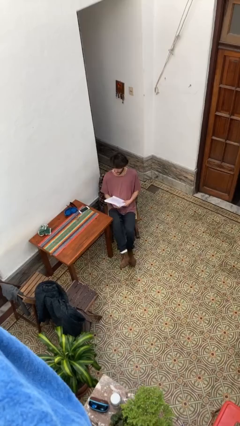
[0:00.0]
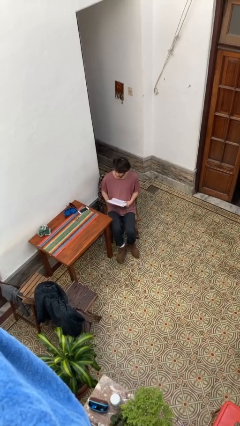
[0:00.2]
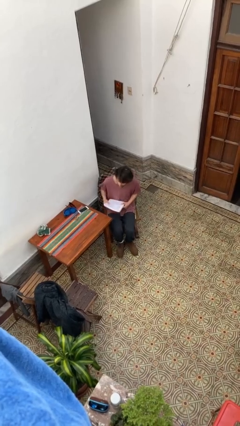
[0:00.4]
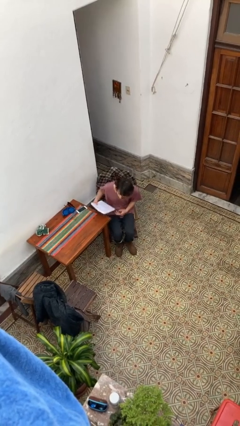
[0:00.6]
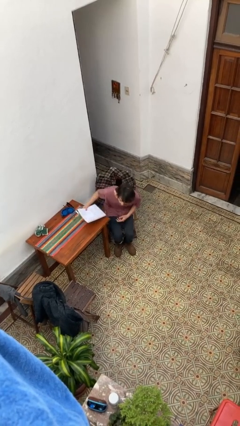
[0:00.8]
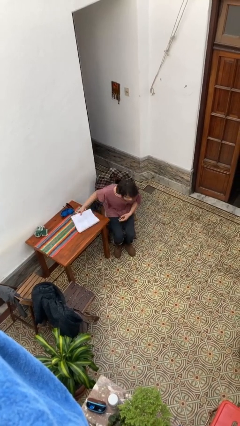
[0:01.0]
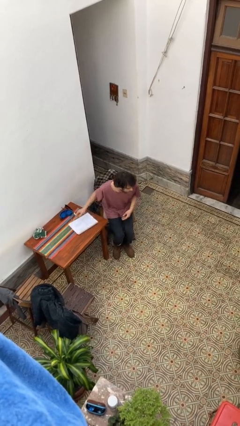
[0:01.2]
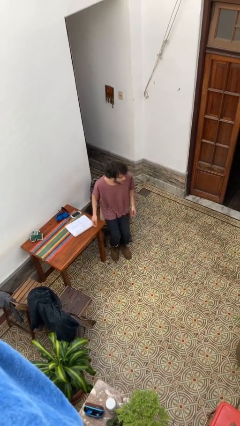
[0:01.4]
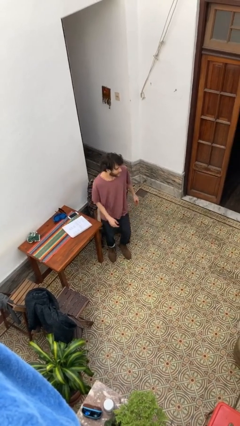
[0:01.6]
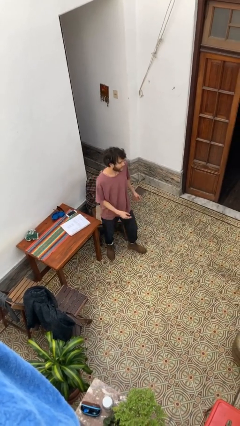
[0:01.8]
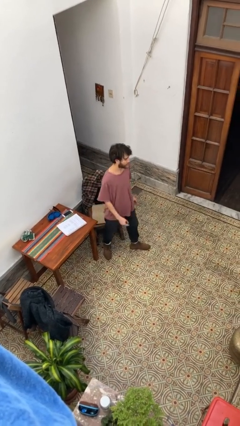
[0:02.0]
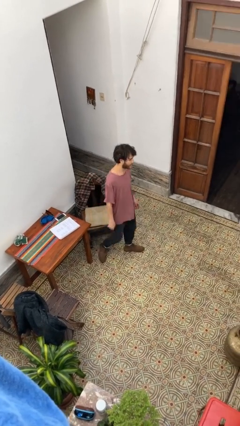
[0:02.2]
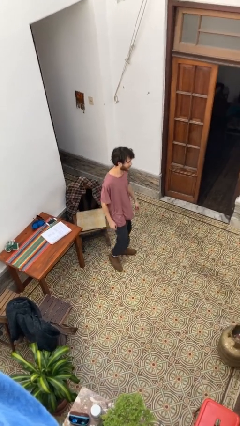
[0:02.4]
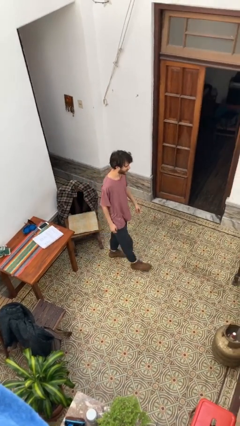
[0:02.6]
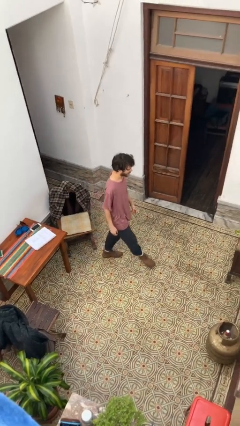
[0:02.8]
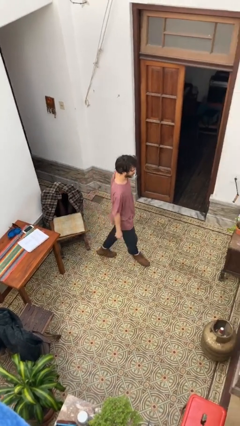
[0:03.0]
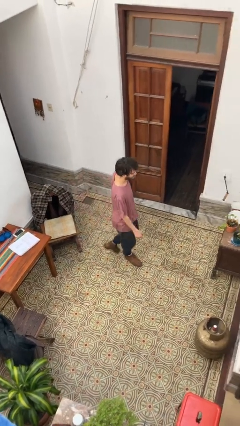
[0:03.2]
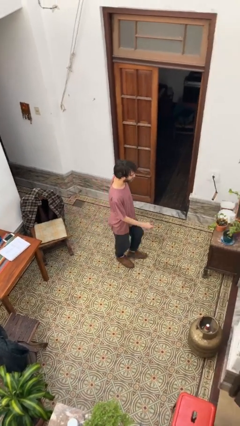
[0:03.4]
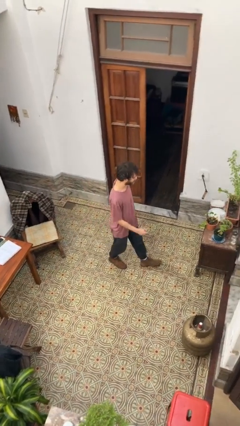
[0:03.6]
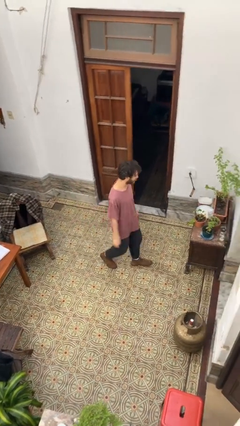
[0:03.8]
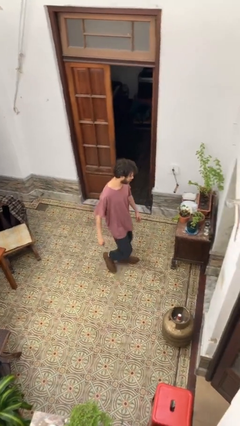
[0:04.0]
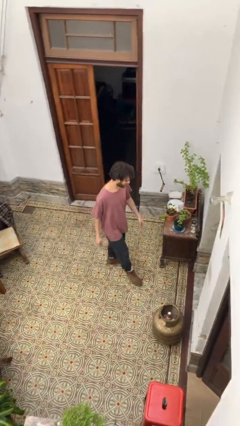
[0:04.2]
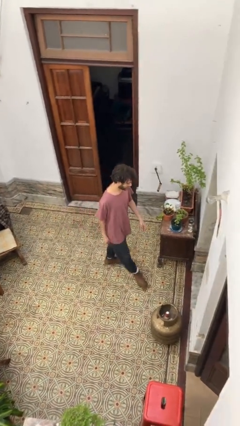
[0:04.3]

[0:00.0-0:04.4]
person stands up

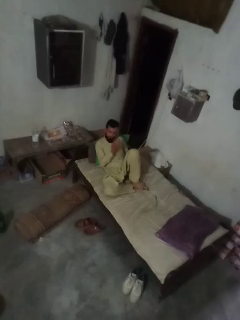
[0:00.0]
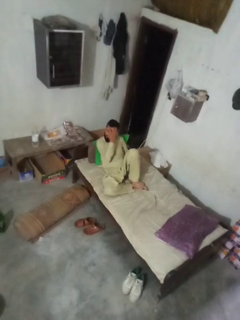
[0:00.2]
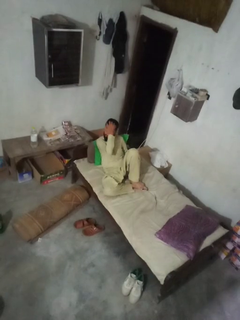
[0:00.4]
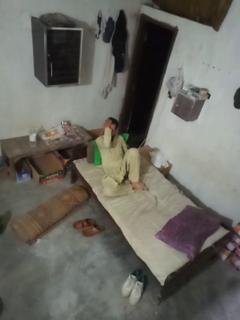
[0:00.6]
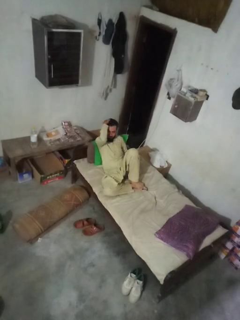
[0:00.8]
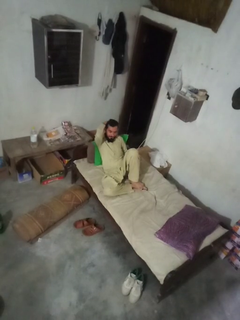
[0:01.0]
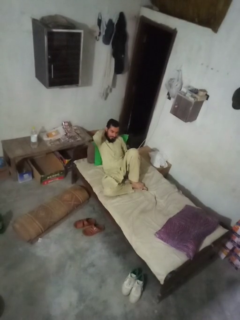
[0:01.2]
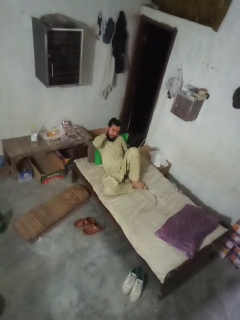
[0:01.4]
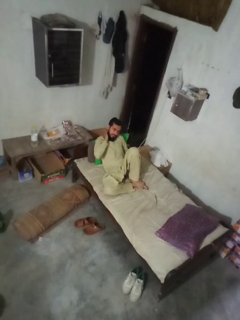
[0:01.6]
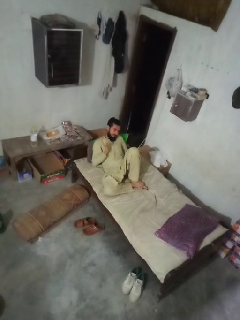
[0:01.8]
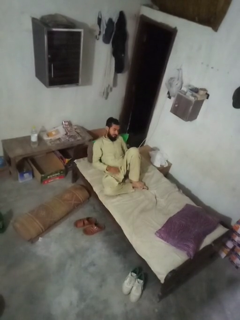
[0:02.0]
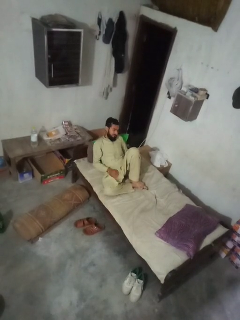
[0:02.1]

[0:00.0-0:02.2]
person strokes hair

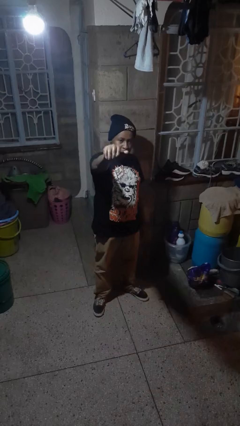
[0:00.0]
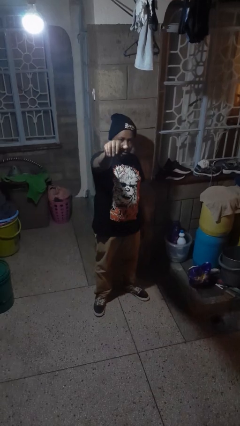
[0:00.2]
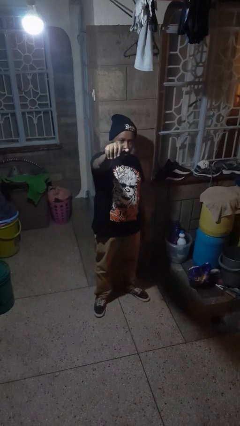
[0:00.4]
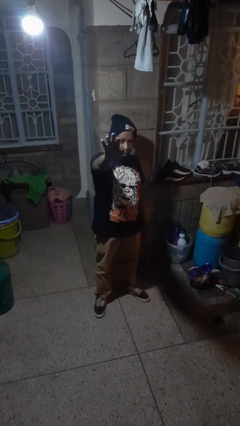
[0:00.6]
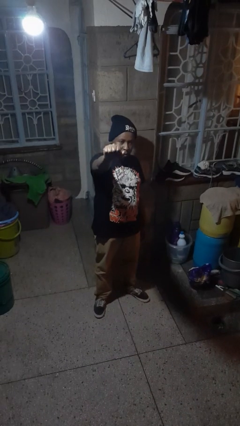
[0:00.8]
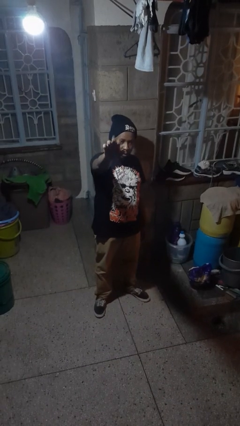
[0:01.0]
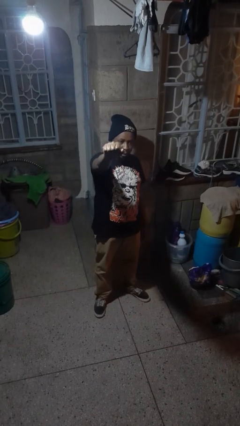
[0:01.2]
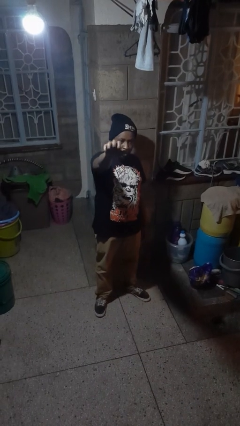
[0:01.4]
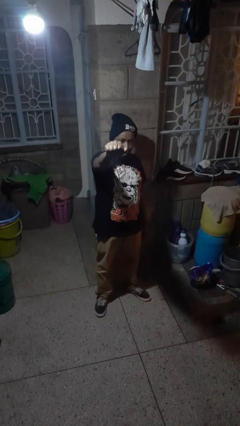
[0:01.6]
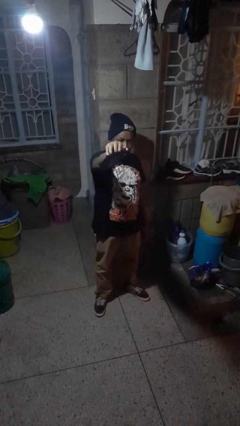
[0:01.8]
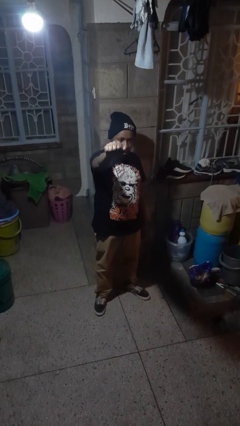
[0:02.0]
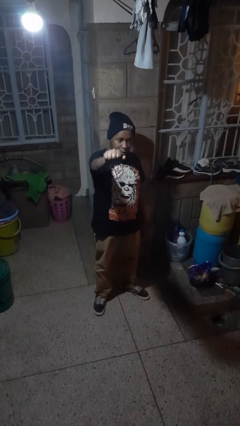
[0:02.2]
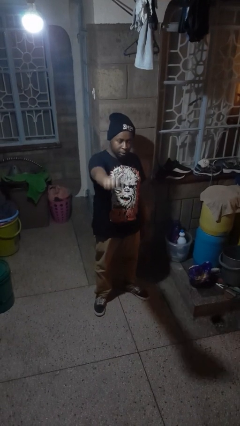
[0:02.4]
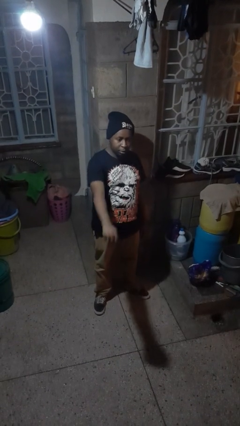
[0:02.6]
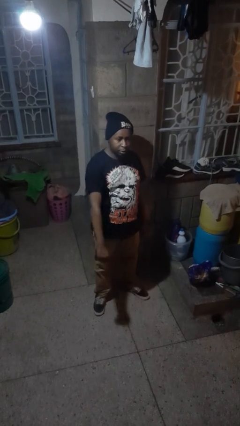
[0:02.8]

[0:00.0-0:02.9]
person gestures come here

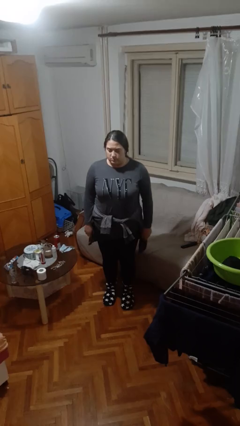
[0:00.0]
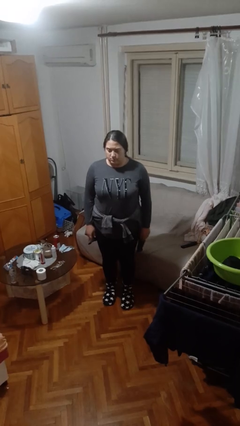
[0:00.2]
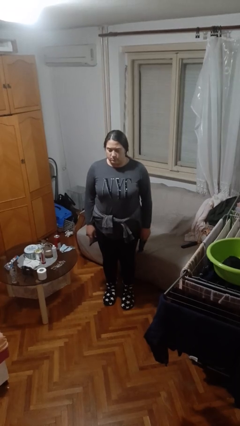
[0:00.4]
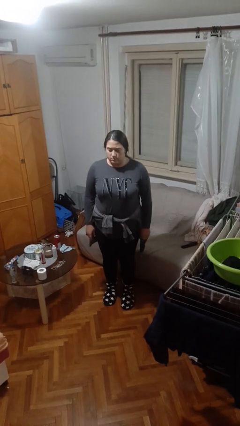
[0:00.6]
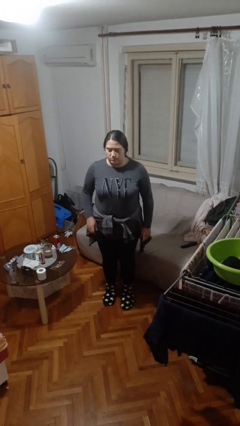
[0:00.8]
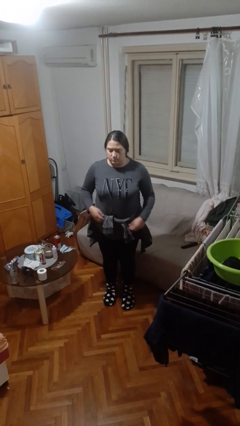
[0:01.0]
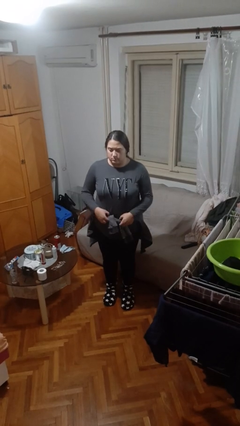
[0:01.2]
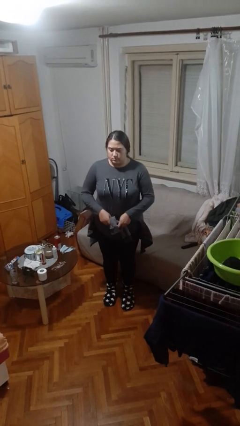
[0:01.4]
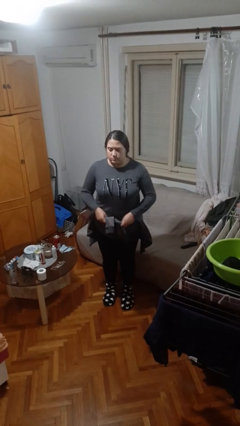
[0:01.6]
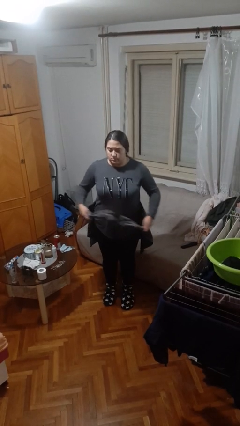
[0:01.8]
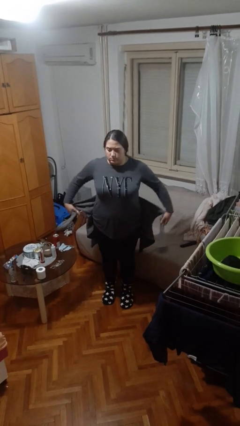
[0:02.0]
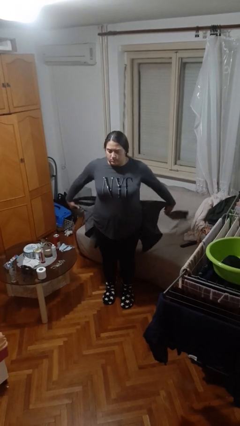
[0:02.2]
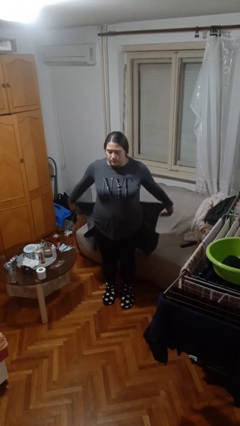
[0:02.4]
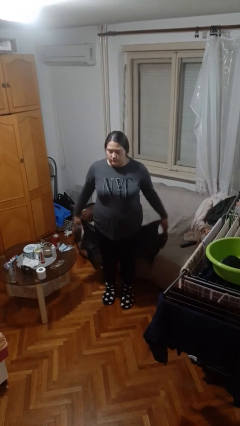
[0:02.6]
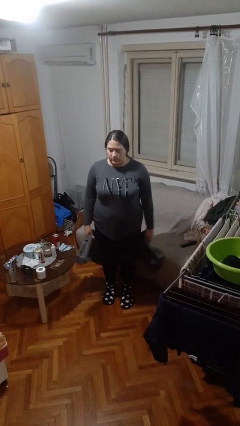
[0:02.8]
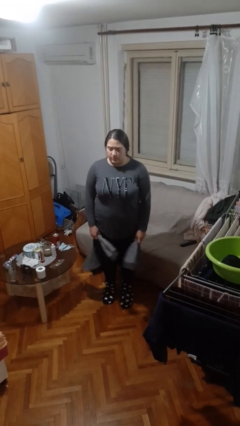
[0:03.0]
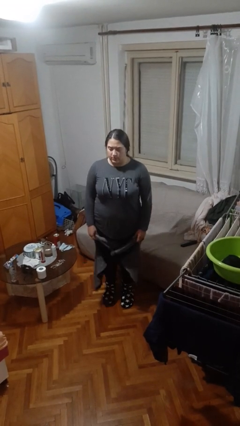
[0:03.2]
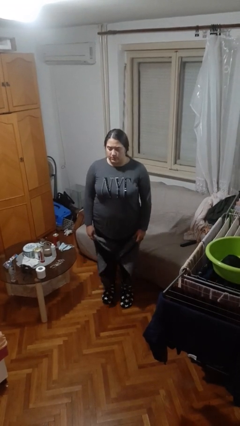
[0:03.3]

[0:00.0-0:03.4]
person unties jacket around waist

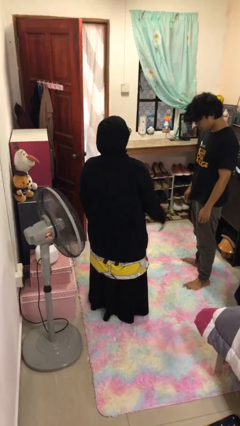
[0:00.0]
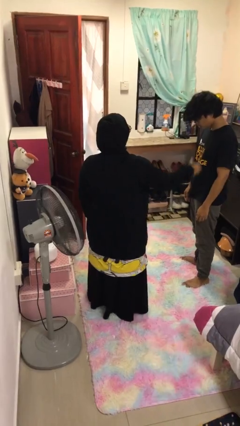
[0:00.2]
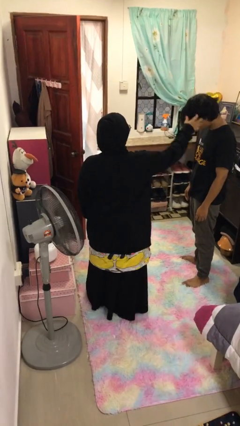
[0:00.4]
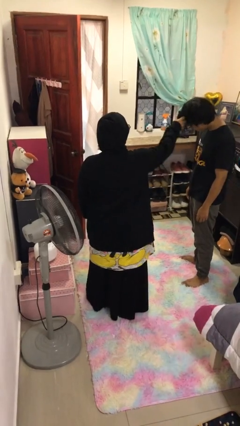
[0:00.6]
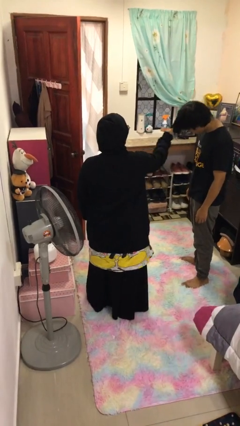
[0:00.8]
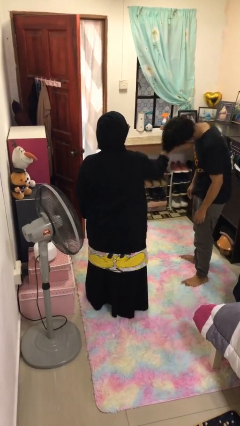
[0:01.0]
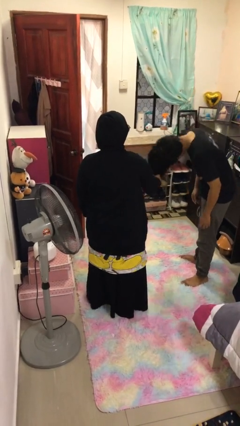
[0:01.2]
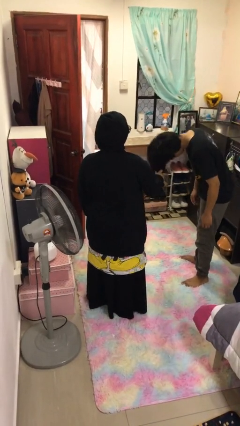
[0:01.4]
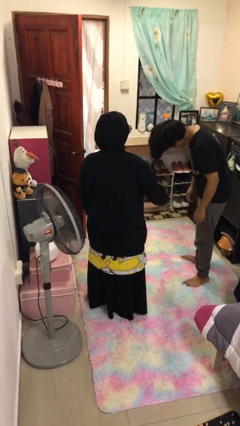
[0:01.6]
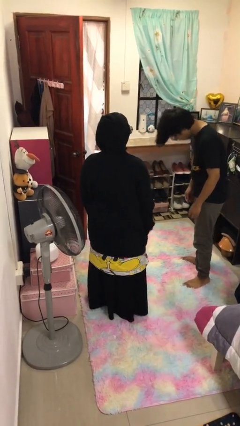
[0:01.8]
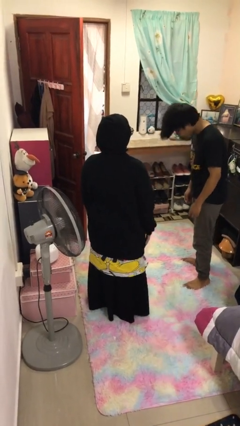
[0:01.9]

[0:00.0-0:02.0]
person grabs person by hair

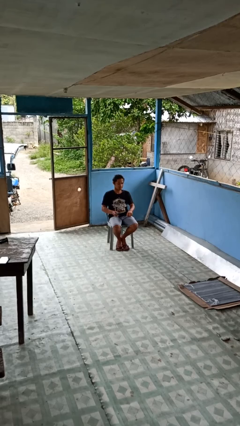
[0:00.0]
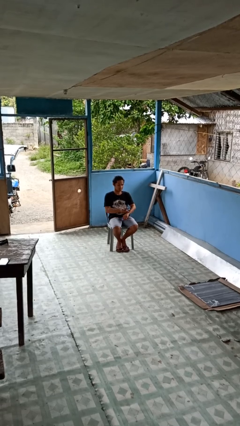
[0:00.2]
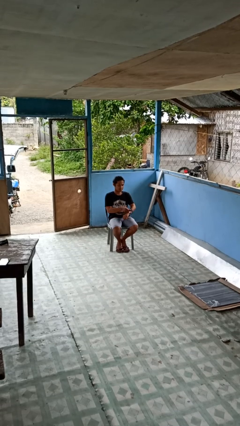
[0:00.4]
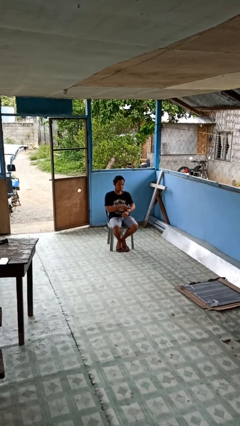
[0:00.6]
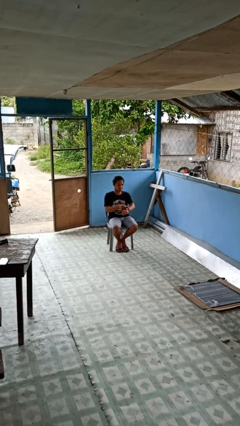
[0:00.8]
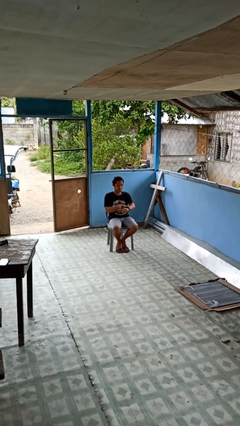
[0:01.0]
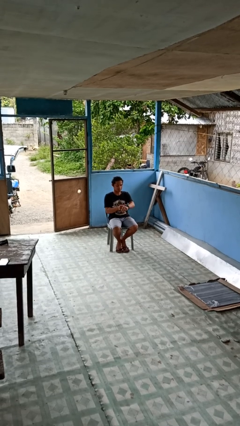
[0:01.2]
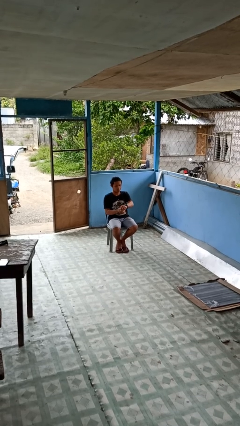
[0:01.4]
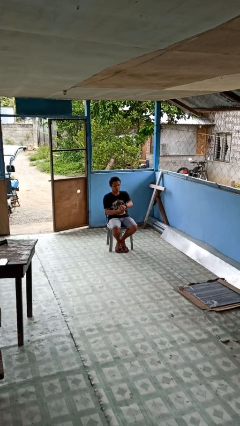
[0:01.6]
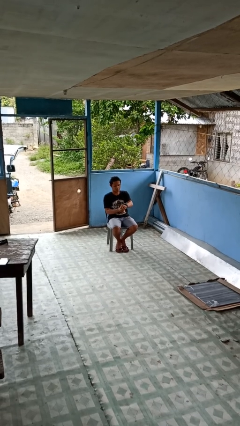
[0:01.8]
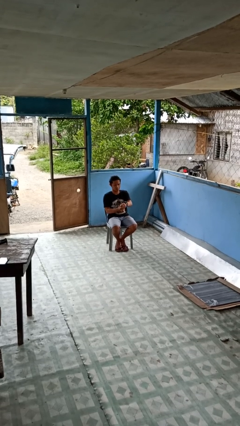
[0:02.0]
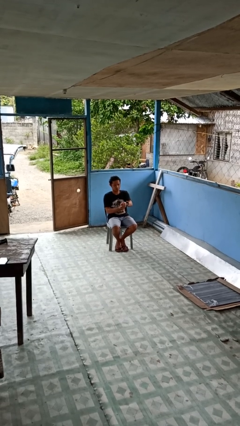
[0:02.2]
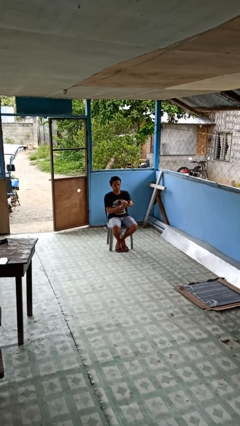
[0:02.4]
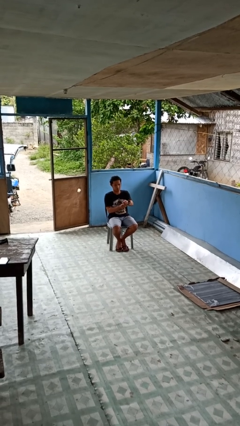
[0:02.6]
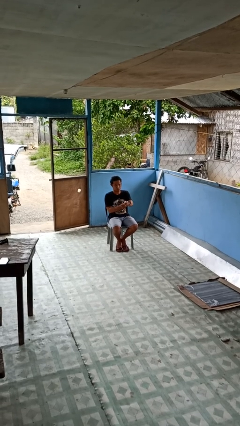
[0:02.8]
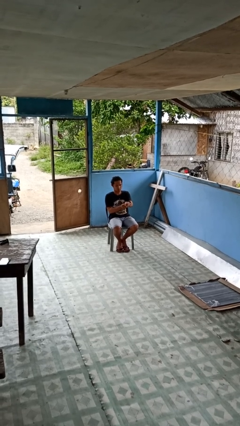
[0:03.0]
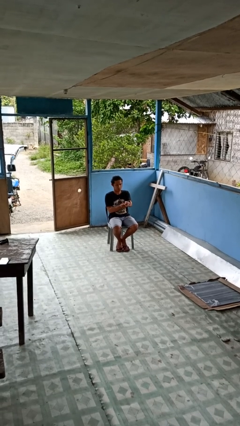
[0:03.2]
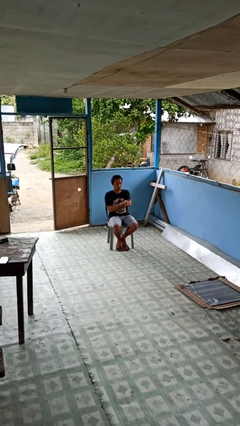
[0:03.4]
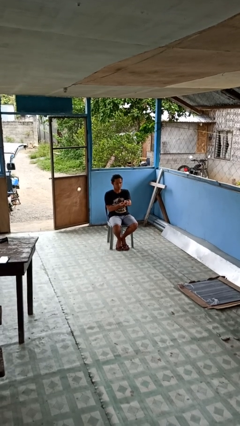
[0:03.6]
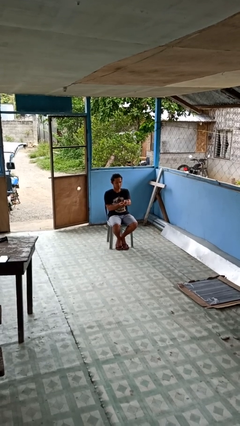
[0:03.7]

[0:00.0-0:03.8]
person puts on wristwatch
